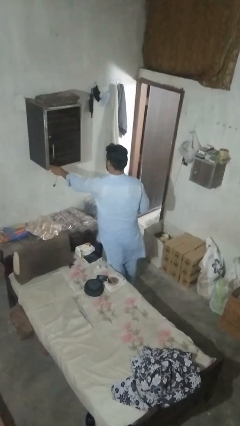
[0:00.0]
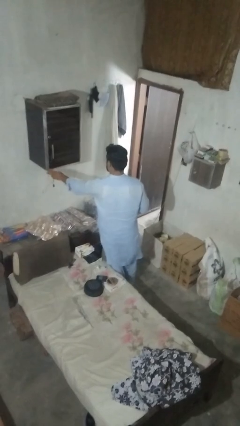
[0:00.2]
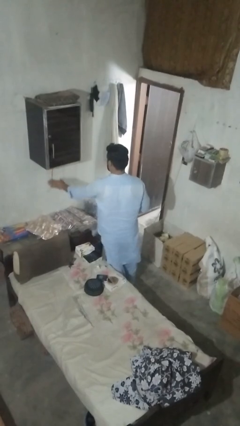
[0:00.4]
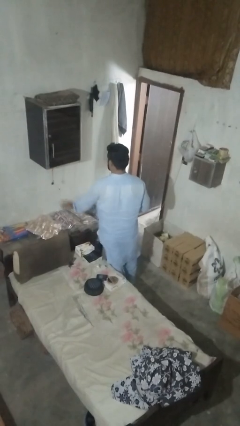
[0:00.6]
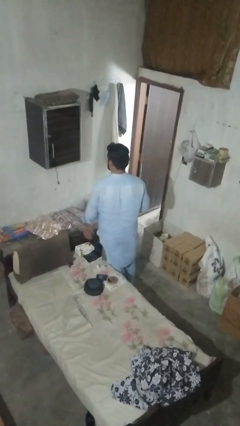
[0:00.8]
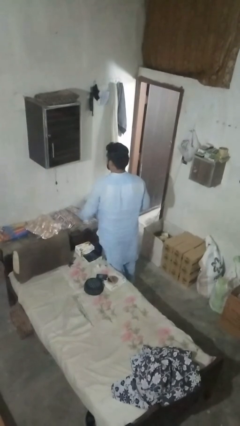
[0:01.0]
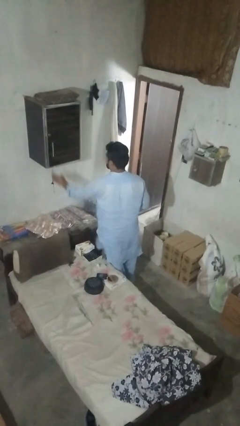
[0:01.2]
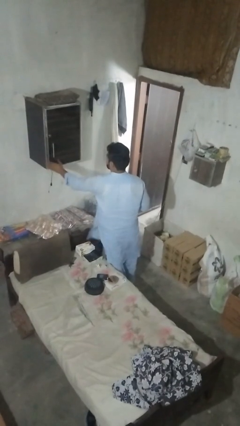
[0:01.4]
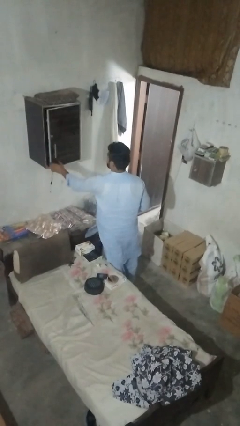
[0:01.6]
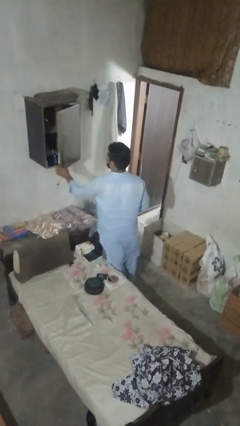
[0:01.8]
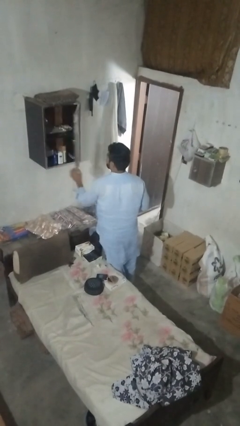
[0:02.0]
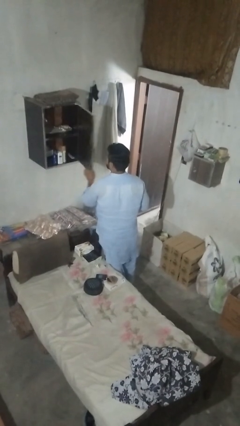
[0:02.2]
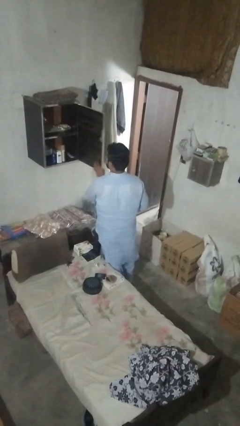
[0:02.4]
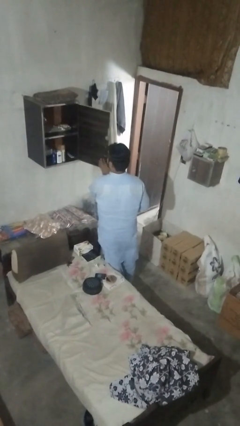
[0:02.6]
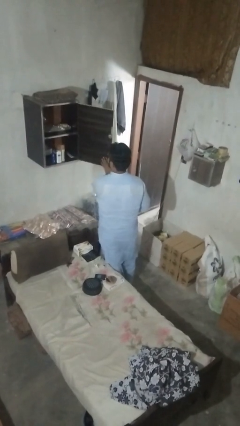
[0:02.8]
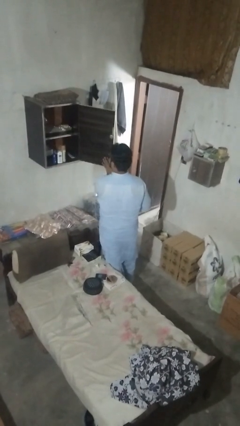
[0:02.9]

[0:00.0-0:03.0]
person opens dresser drawer

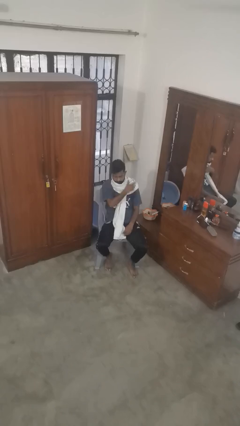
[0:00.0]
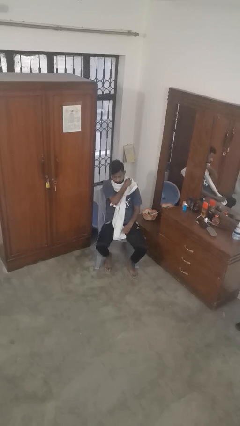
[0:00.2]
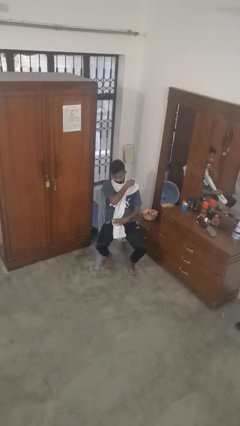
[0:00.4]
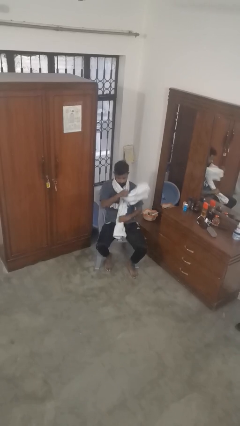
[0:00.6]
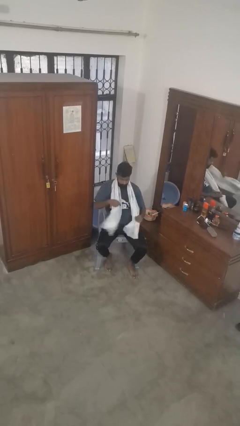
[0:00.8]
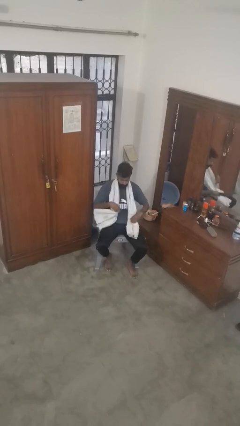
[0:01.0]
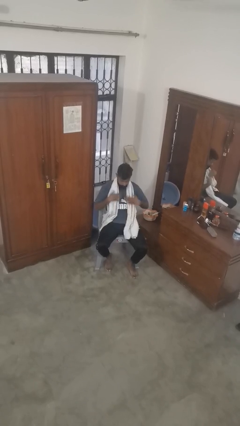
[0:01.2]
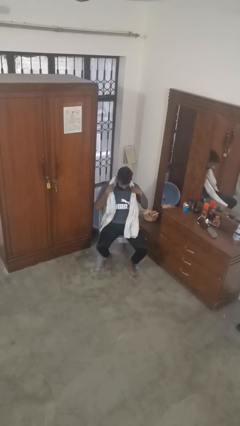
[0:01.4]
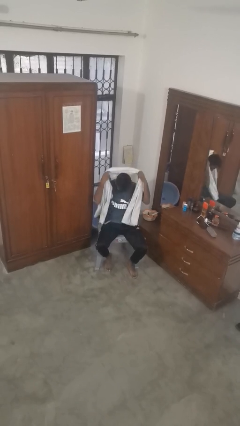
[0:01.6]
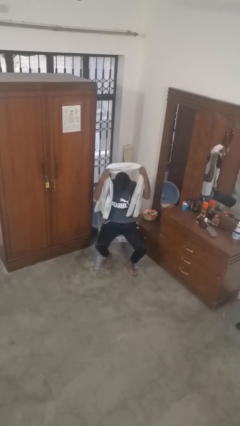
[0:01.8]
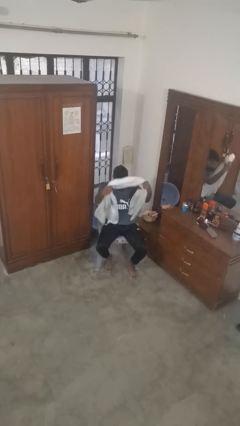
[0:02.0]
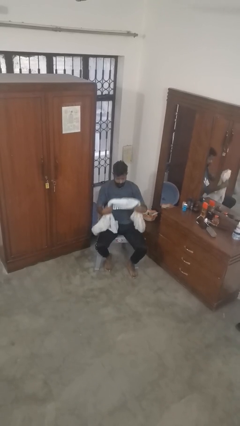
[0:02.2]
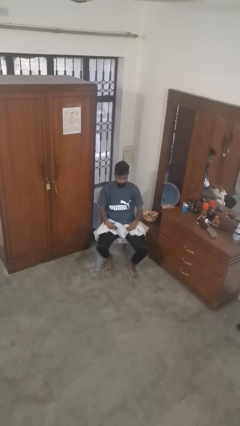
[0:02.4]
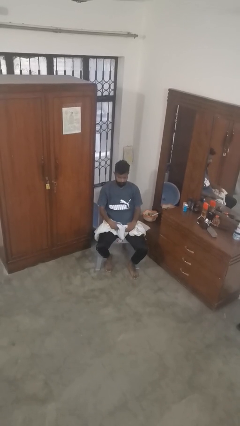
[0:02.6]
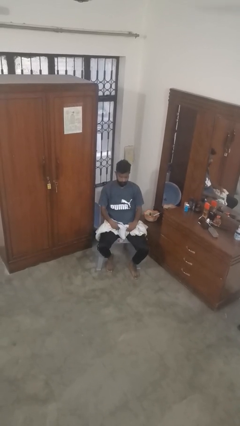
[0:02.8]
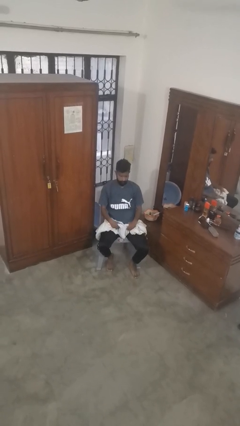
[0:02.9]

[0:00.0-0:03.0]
person takes off scarf

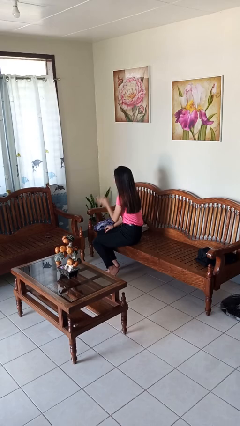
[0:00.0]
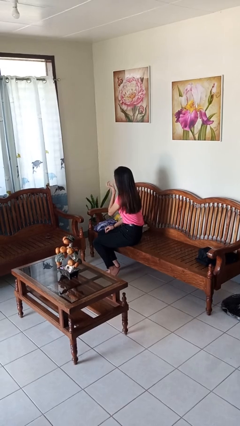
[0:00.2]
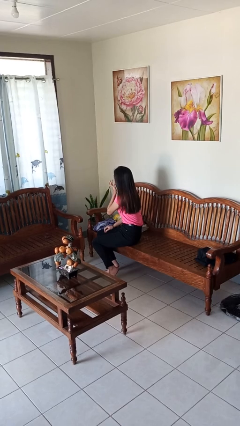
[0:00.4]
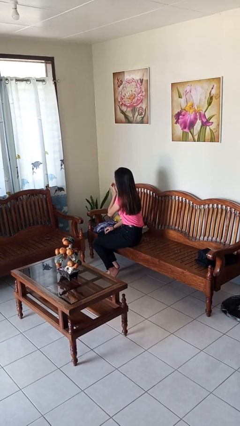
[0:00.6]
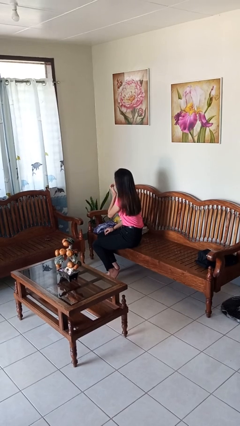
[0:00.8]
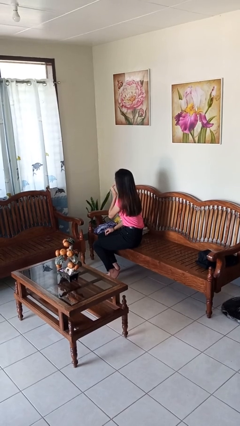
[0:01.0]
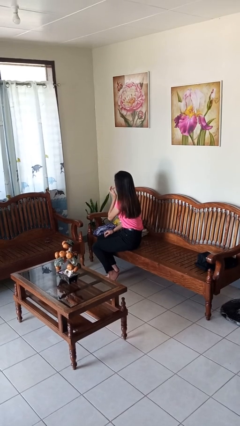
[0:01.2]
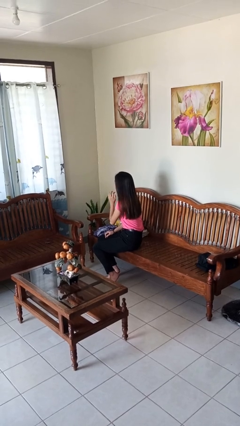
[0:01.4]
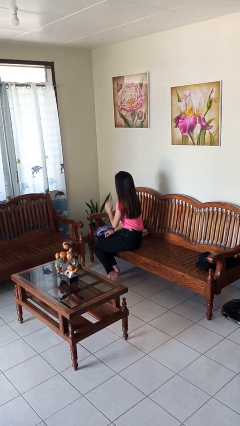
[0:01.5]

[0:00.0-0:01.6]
person licks fingers

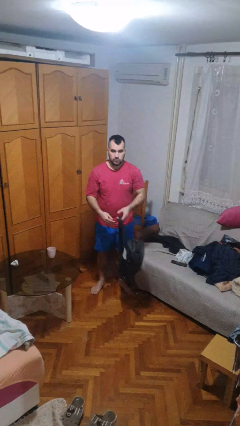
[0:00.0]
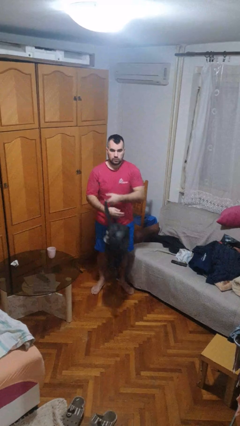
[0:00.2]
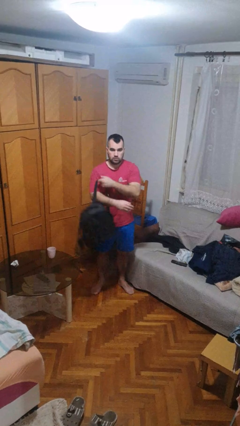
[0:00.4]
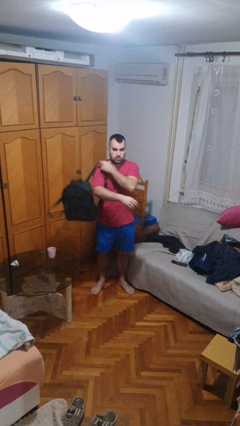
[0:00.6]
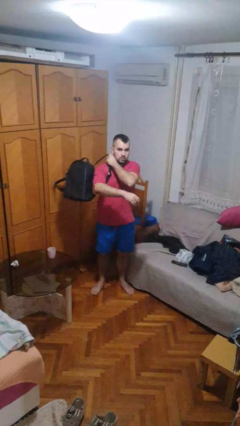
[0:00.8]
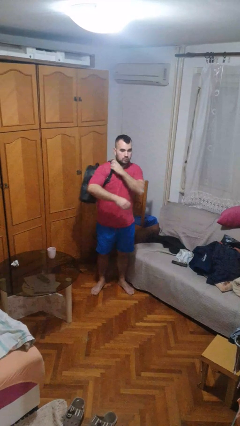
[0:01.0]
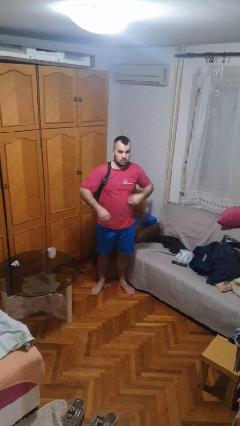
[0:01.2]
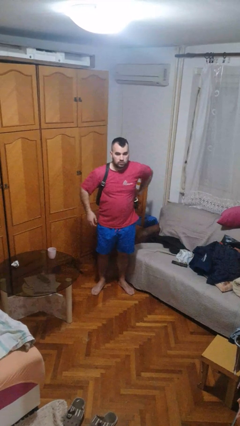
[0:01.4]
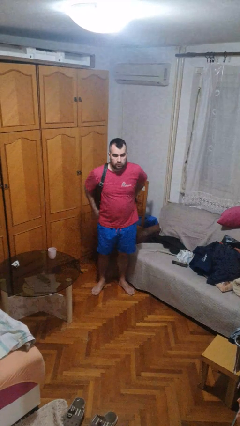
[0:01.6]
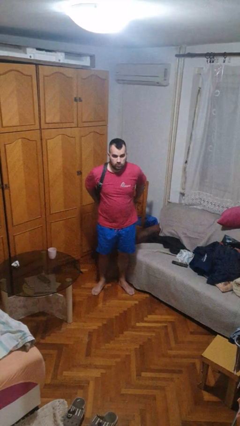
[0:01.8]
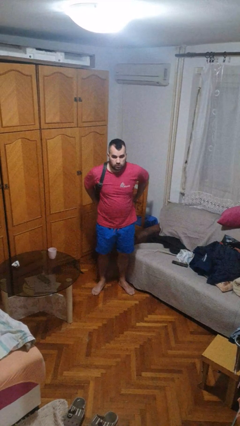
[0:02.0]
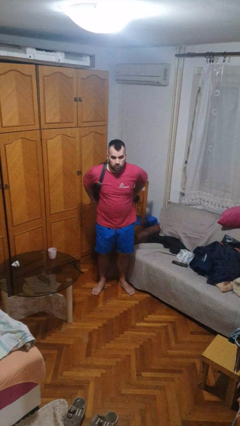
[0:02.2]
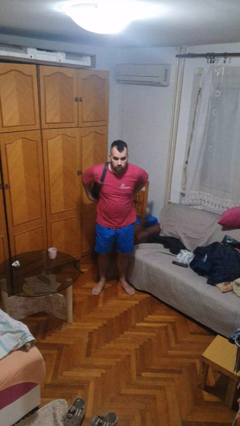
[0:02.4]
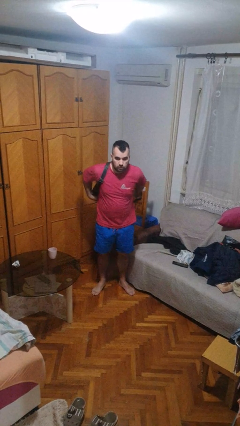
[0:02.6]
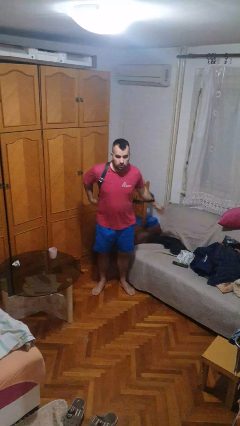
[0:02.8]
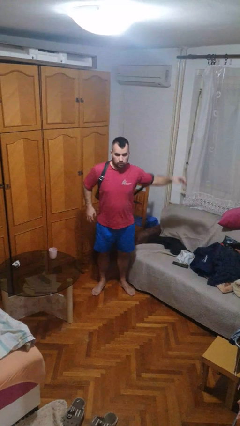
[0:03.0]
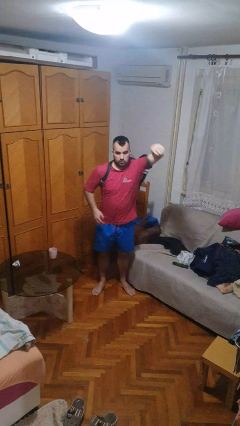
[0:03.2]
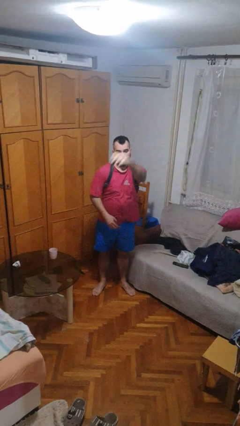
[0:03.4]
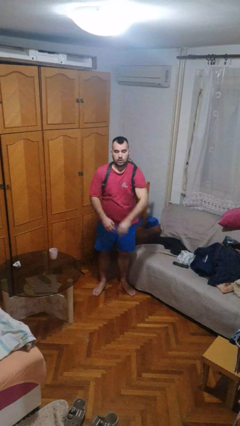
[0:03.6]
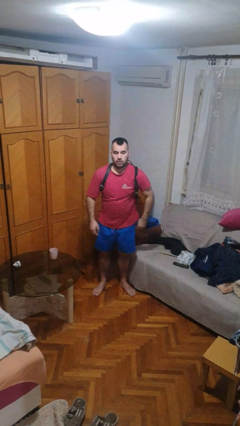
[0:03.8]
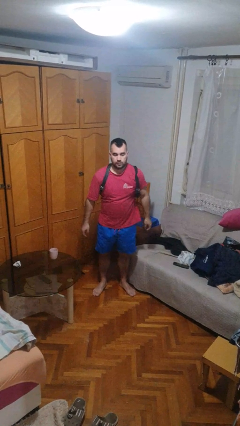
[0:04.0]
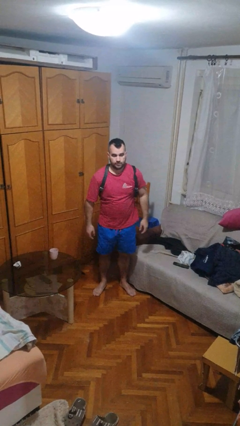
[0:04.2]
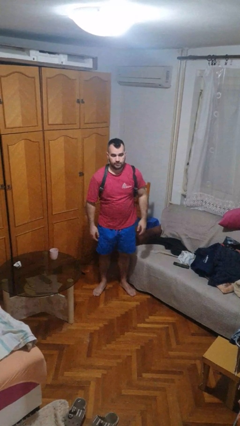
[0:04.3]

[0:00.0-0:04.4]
person puts on backpack

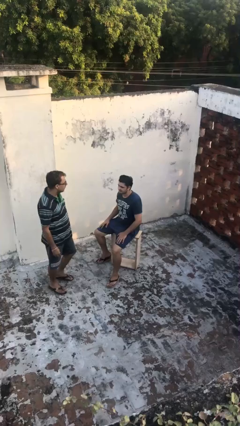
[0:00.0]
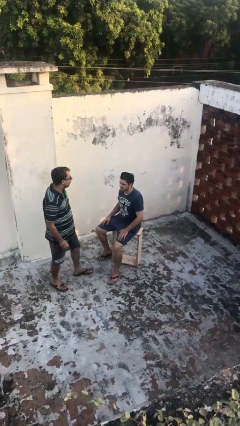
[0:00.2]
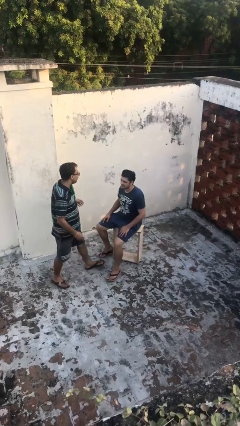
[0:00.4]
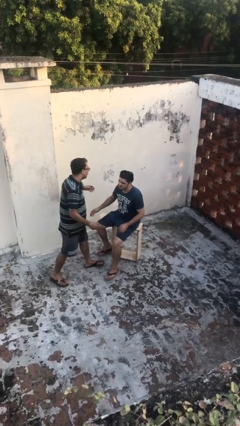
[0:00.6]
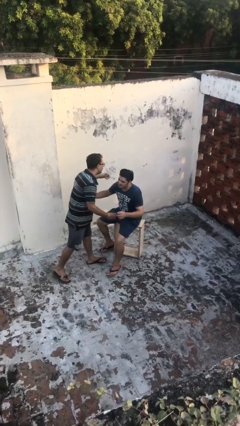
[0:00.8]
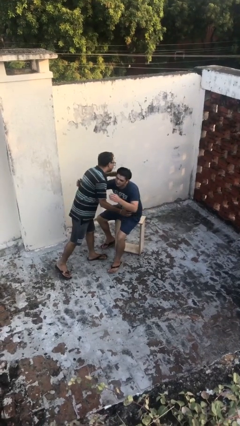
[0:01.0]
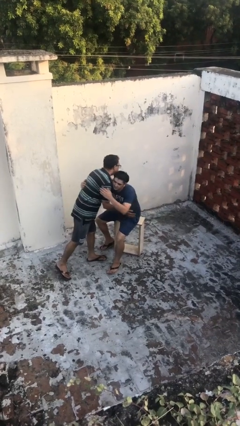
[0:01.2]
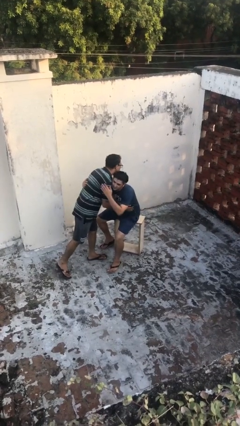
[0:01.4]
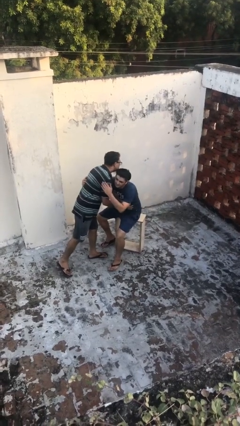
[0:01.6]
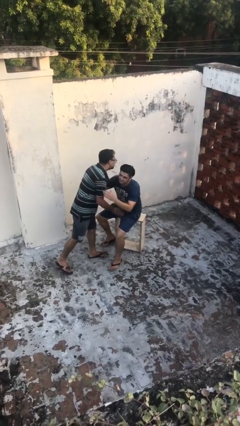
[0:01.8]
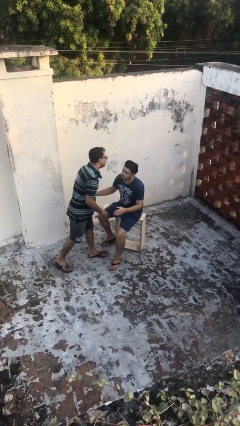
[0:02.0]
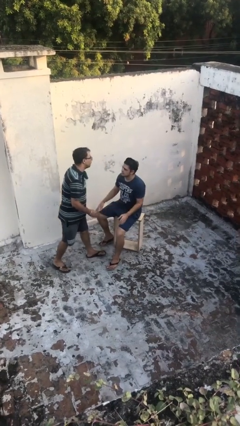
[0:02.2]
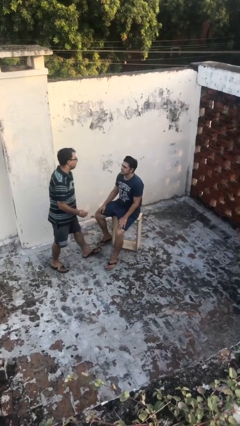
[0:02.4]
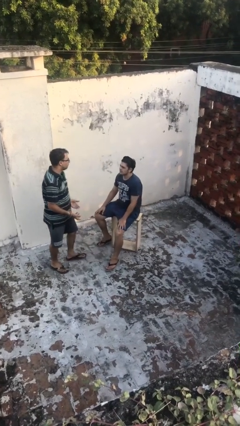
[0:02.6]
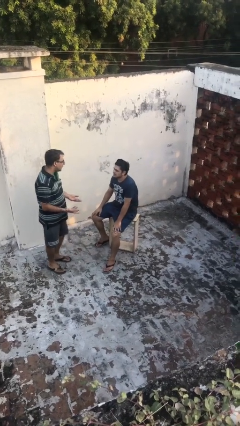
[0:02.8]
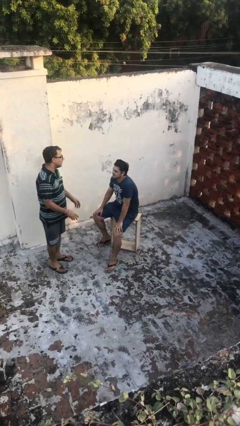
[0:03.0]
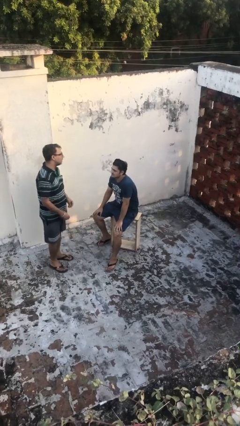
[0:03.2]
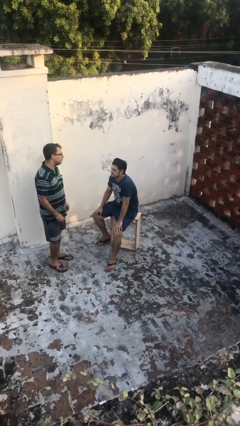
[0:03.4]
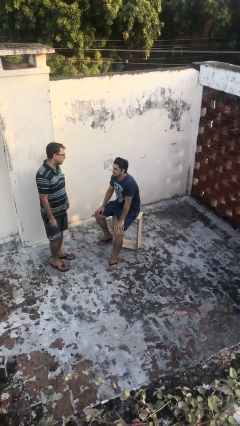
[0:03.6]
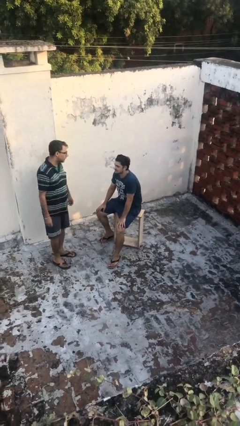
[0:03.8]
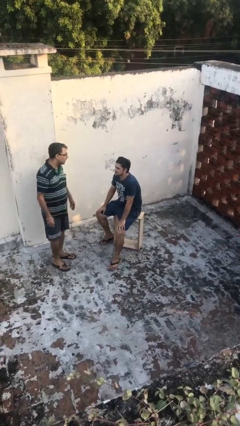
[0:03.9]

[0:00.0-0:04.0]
person embraces person

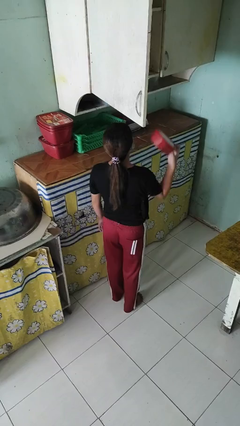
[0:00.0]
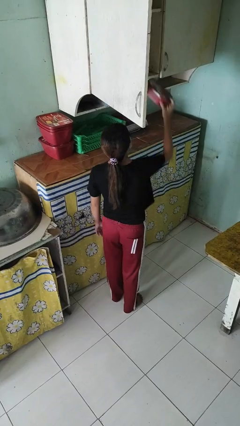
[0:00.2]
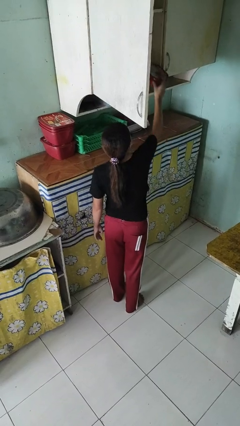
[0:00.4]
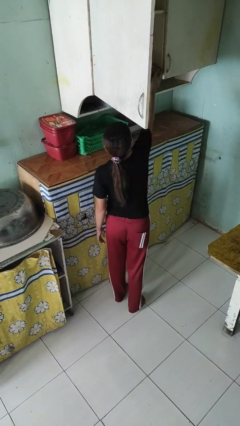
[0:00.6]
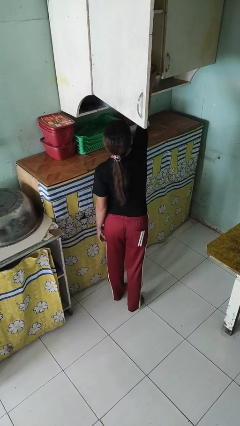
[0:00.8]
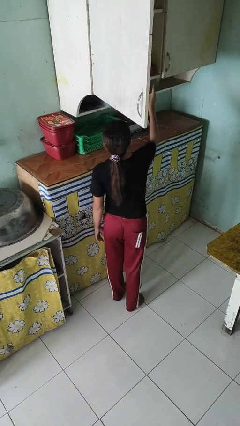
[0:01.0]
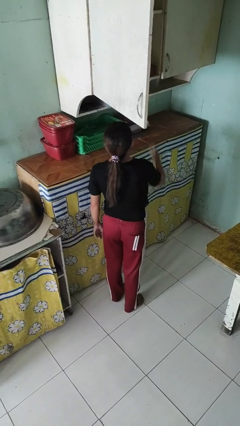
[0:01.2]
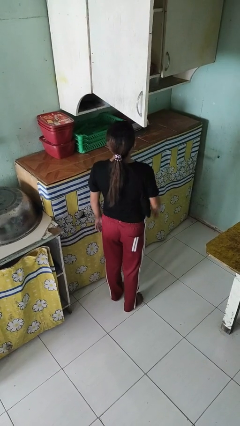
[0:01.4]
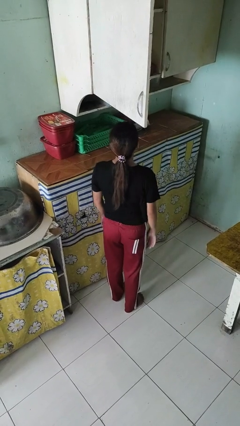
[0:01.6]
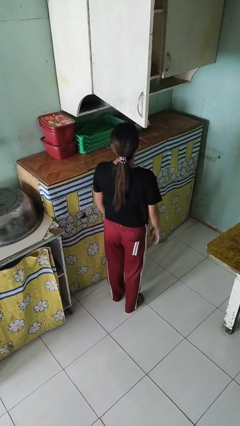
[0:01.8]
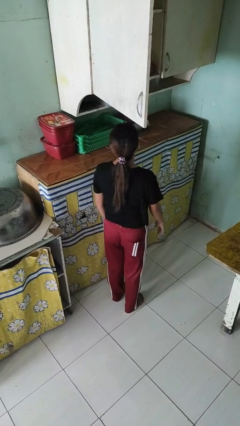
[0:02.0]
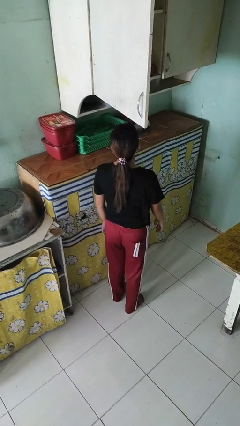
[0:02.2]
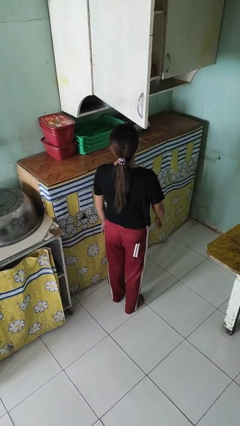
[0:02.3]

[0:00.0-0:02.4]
person puts object in cabinet
